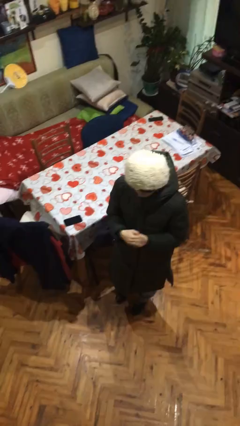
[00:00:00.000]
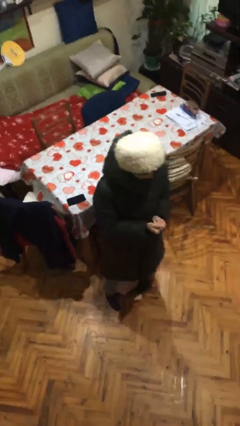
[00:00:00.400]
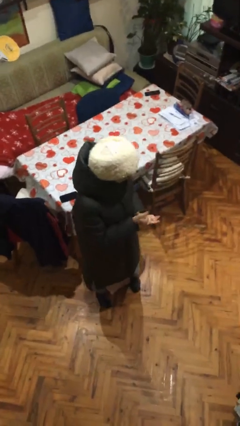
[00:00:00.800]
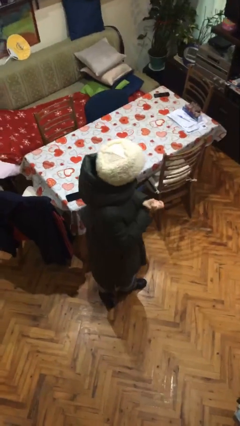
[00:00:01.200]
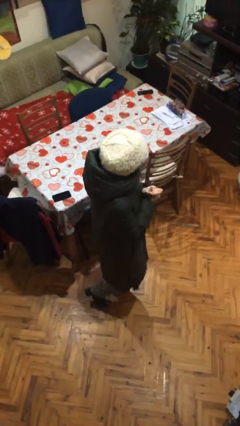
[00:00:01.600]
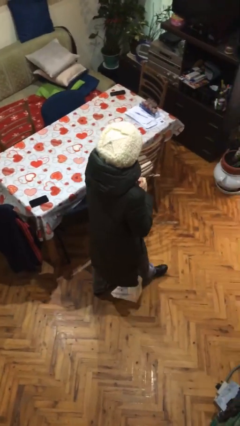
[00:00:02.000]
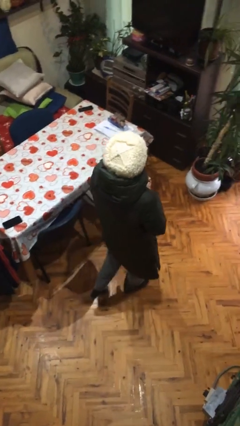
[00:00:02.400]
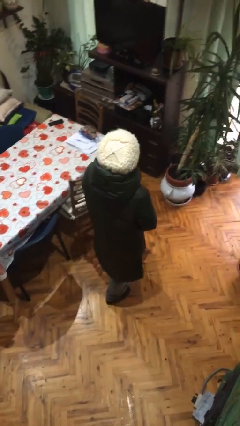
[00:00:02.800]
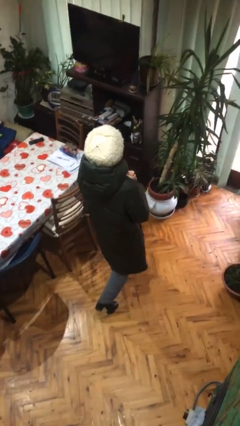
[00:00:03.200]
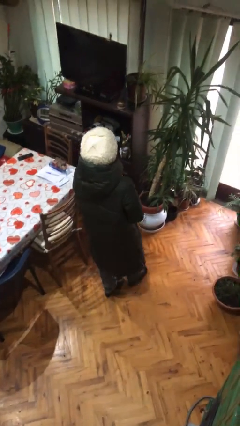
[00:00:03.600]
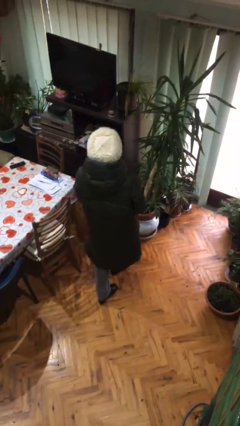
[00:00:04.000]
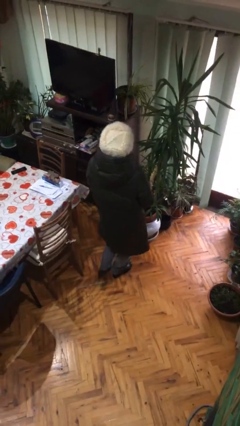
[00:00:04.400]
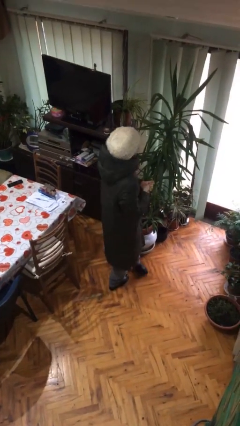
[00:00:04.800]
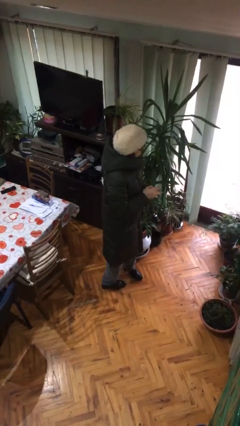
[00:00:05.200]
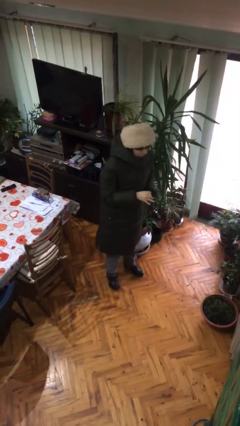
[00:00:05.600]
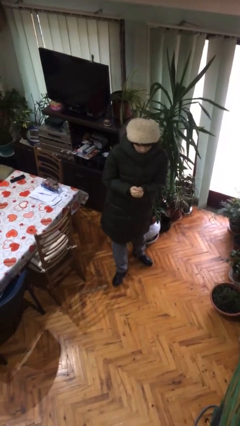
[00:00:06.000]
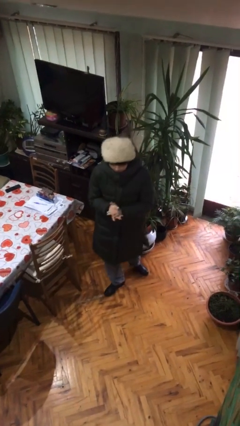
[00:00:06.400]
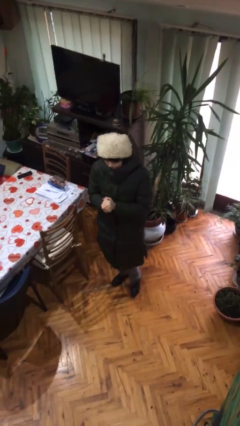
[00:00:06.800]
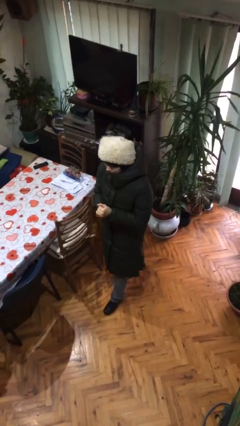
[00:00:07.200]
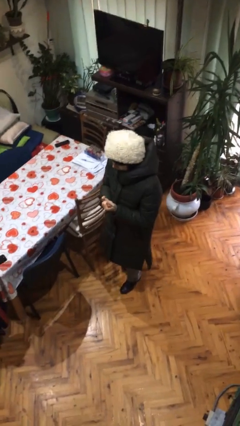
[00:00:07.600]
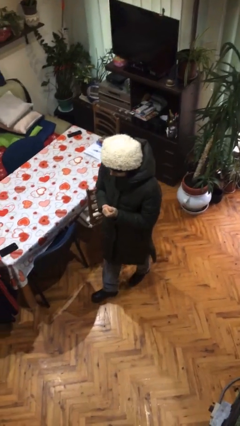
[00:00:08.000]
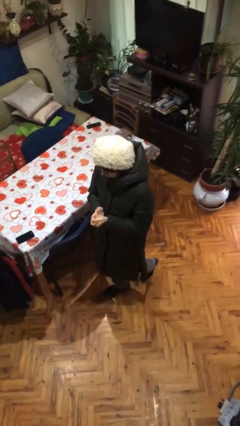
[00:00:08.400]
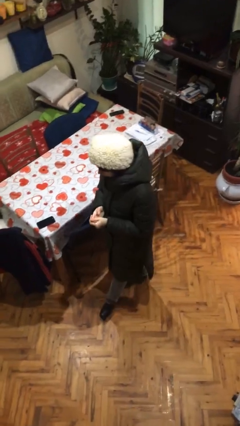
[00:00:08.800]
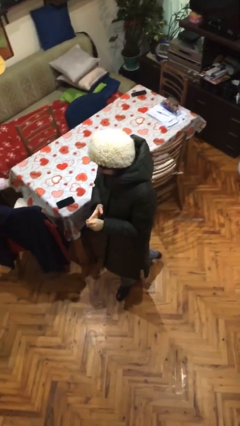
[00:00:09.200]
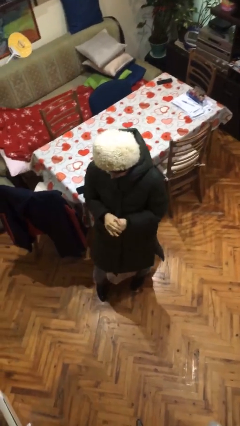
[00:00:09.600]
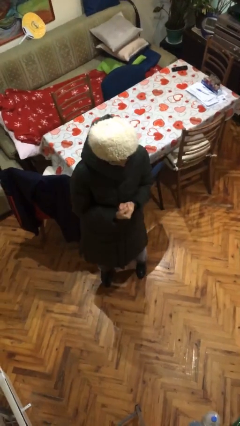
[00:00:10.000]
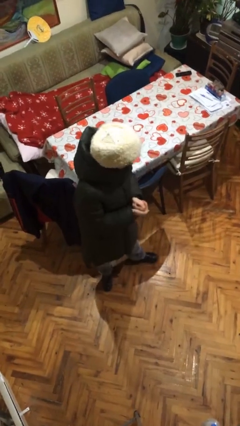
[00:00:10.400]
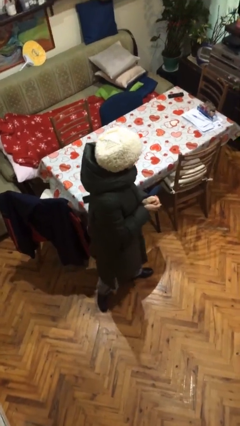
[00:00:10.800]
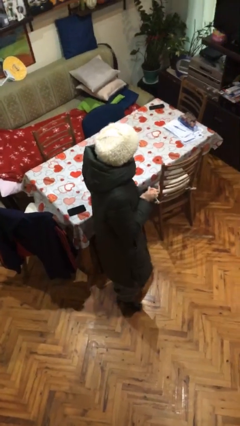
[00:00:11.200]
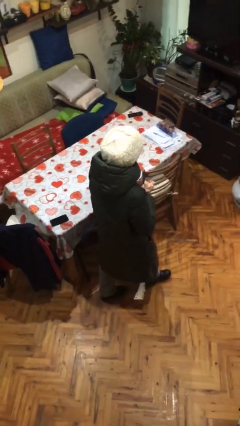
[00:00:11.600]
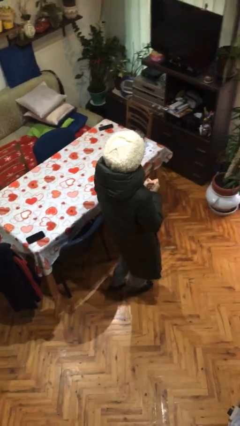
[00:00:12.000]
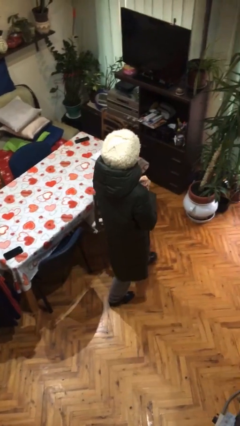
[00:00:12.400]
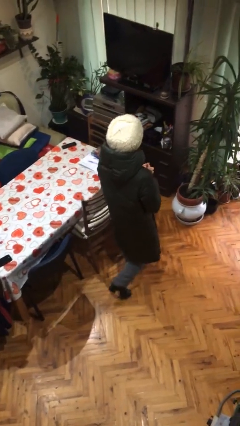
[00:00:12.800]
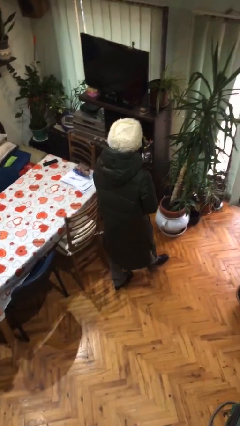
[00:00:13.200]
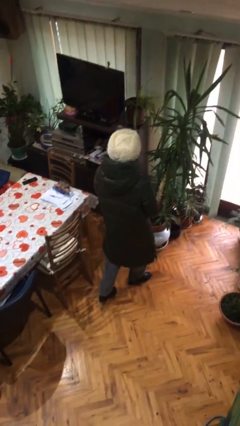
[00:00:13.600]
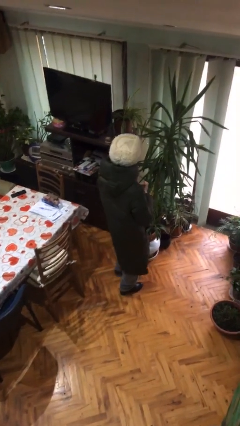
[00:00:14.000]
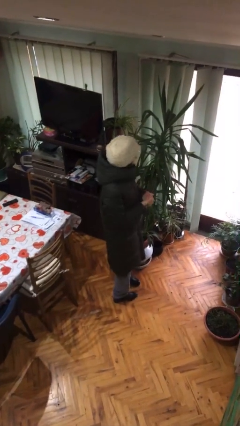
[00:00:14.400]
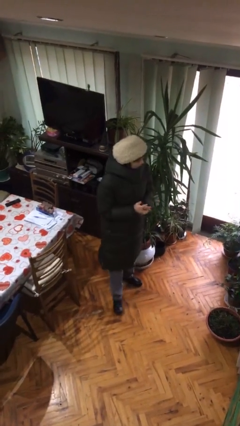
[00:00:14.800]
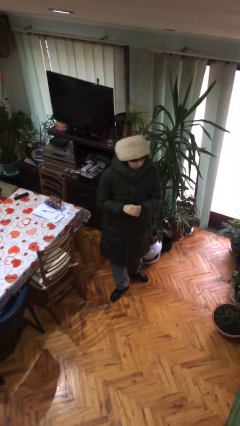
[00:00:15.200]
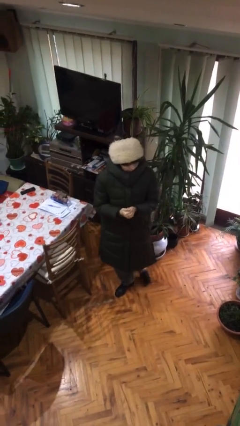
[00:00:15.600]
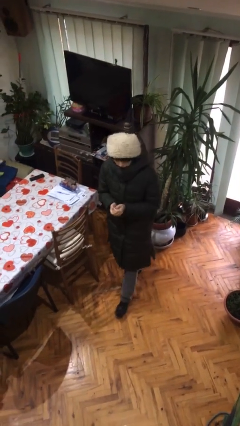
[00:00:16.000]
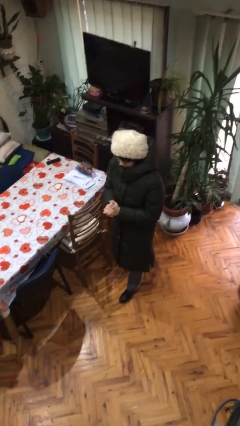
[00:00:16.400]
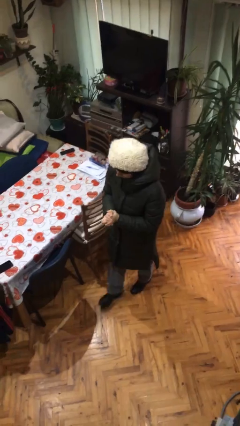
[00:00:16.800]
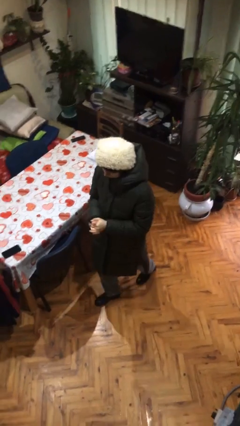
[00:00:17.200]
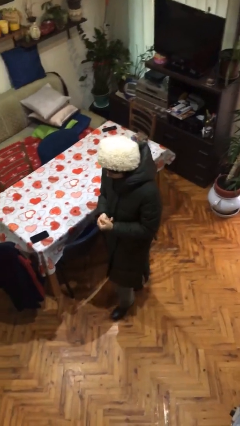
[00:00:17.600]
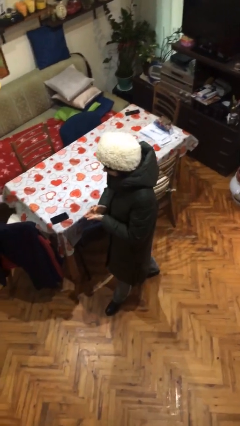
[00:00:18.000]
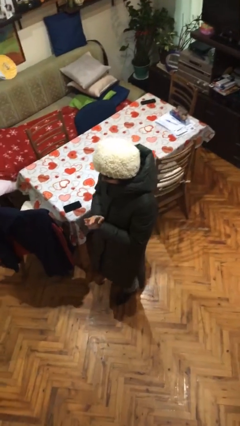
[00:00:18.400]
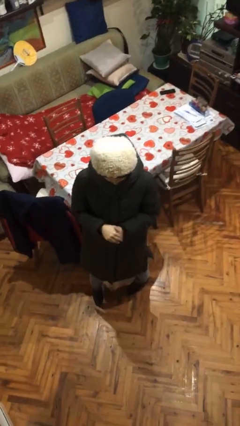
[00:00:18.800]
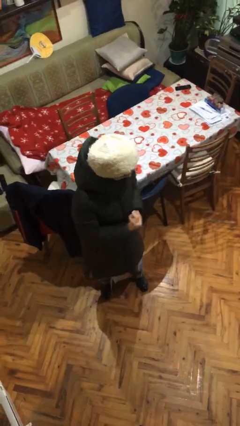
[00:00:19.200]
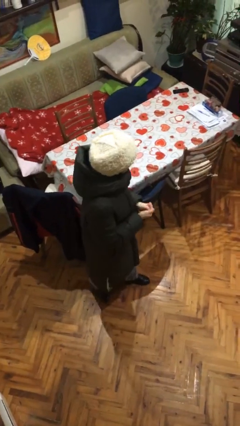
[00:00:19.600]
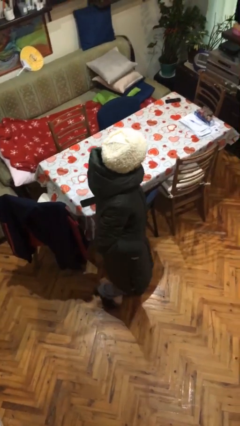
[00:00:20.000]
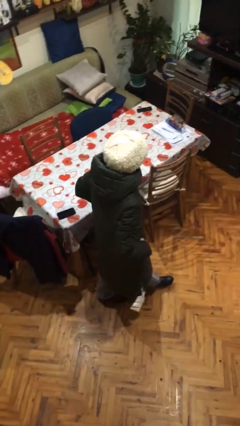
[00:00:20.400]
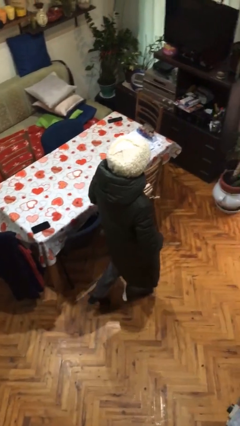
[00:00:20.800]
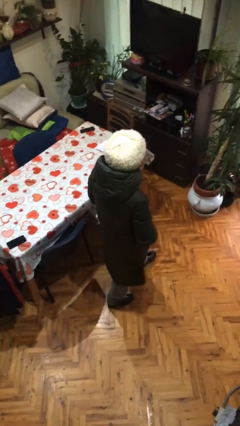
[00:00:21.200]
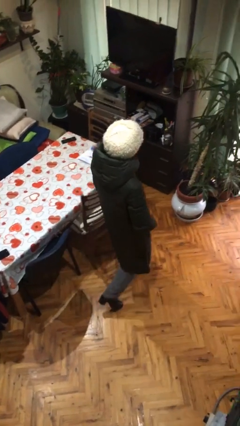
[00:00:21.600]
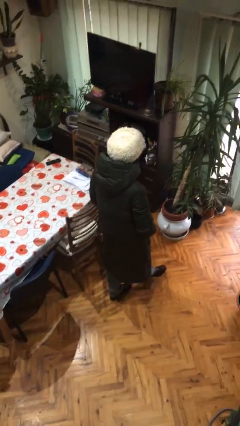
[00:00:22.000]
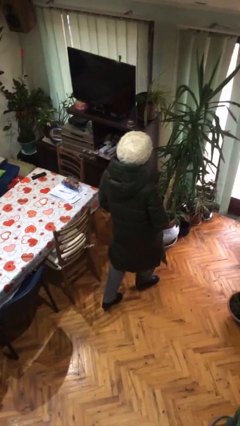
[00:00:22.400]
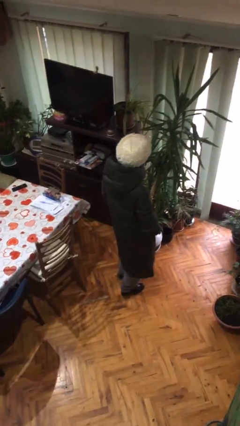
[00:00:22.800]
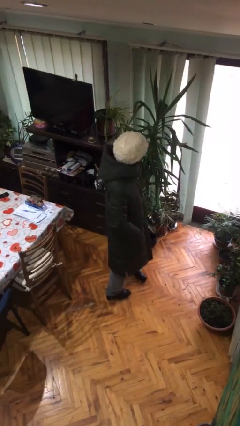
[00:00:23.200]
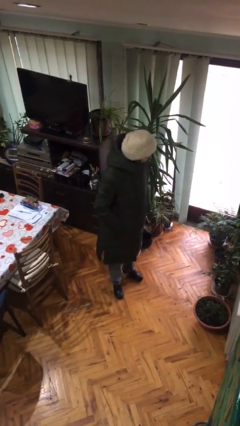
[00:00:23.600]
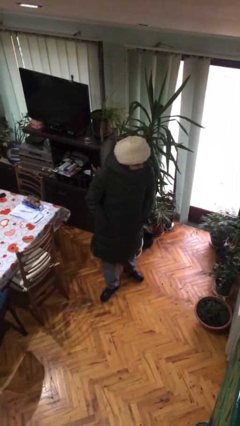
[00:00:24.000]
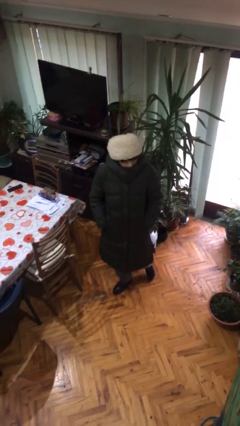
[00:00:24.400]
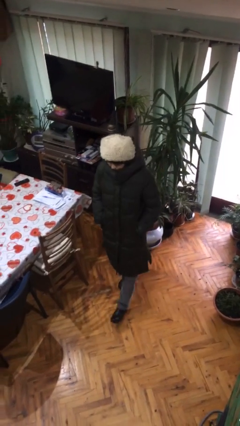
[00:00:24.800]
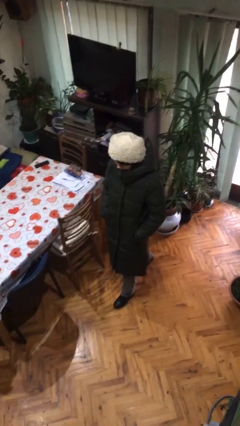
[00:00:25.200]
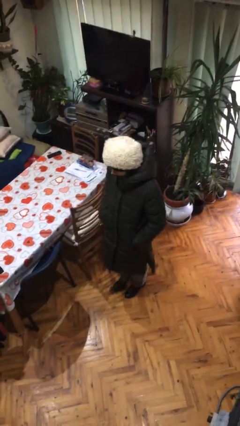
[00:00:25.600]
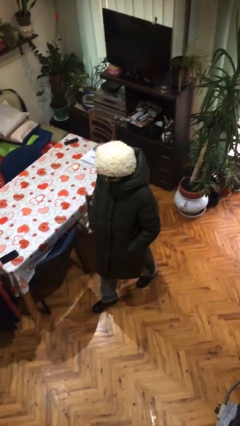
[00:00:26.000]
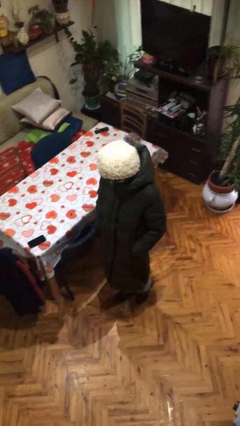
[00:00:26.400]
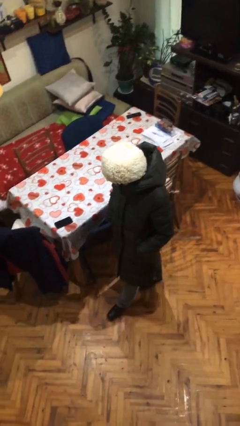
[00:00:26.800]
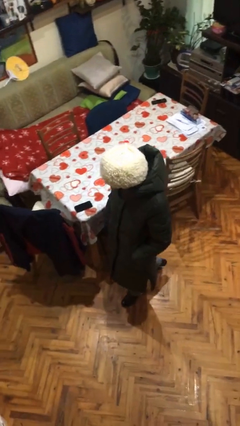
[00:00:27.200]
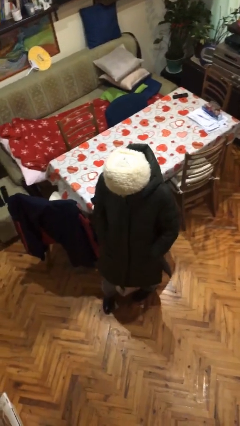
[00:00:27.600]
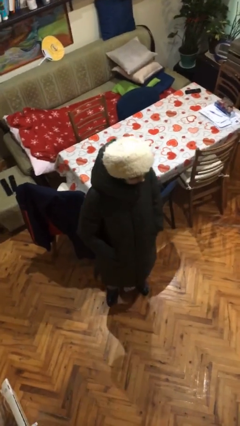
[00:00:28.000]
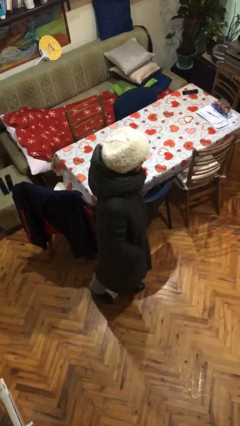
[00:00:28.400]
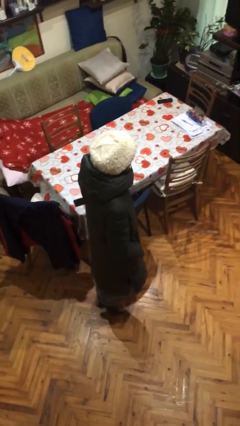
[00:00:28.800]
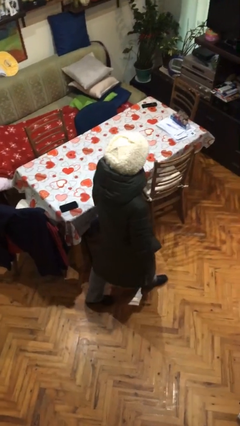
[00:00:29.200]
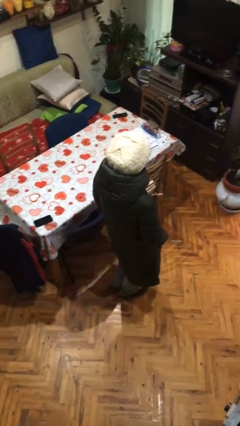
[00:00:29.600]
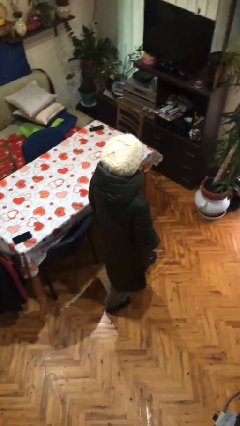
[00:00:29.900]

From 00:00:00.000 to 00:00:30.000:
person walks

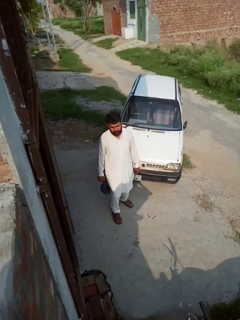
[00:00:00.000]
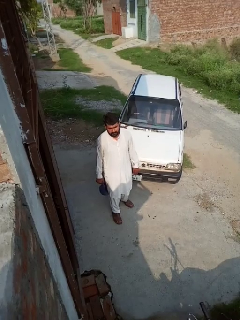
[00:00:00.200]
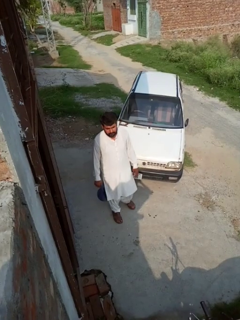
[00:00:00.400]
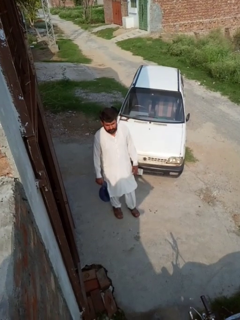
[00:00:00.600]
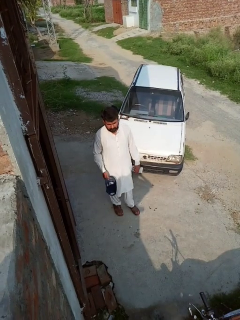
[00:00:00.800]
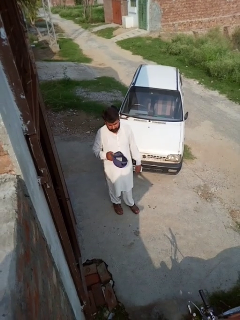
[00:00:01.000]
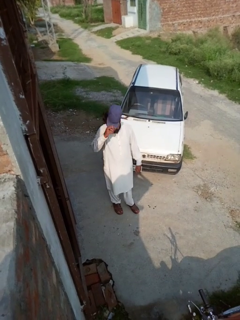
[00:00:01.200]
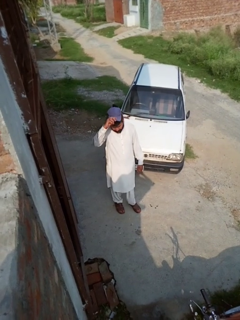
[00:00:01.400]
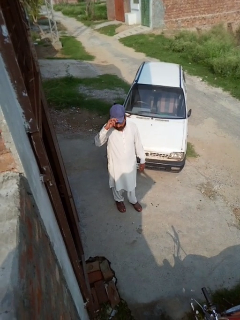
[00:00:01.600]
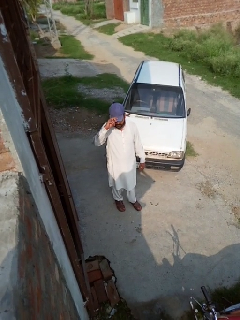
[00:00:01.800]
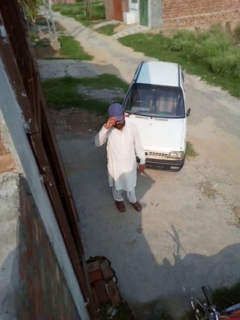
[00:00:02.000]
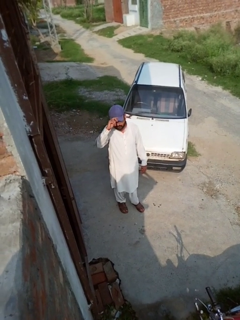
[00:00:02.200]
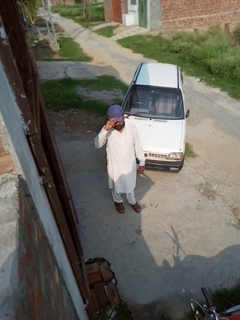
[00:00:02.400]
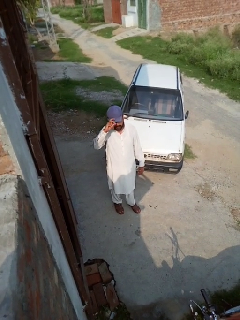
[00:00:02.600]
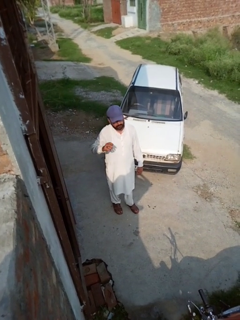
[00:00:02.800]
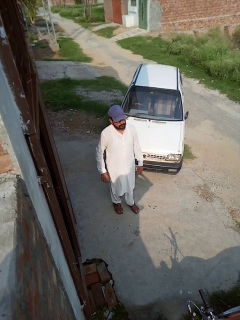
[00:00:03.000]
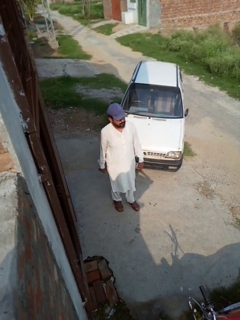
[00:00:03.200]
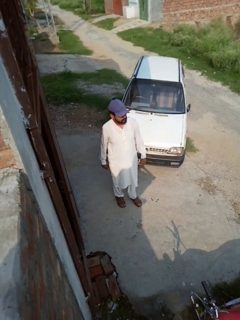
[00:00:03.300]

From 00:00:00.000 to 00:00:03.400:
person puts on hat

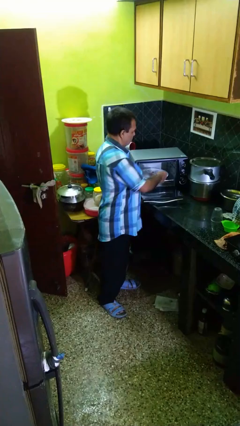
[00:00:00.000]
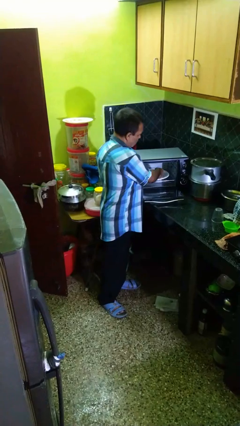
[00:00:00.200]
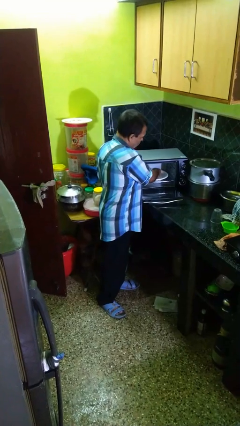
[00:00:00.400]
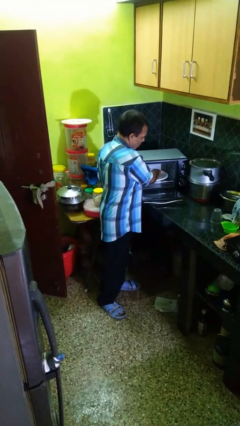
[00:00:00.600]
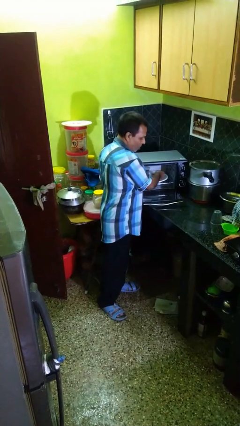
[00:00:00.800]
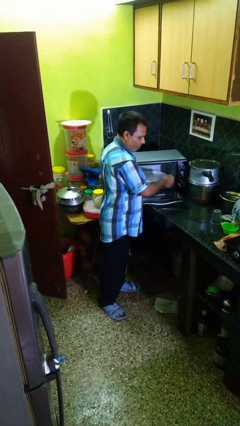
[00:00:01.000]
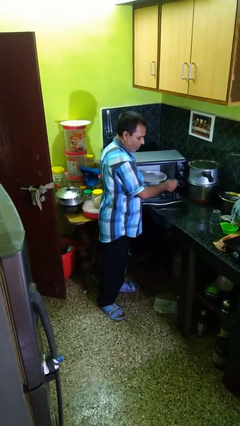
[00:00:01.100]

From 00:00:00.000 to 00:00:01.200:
person takes object from microwave
